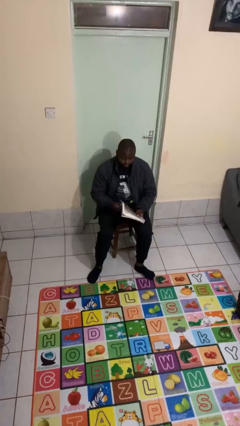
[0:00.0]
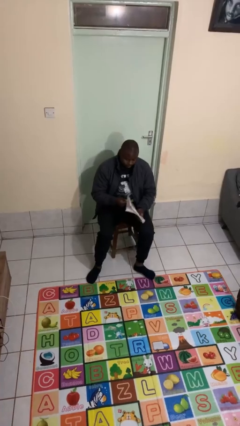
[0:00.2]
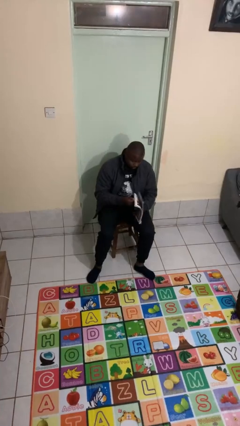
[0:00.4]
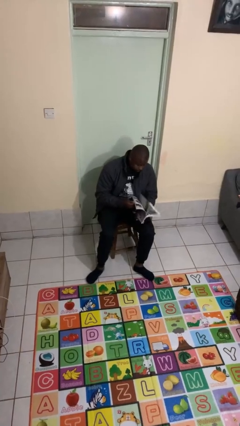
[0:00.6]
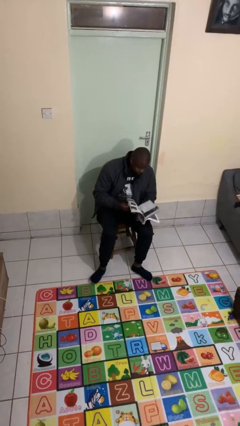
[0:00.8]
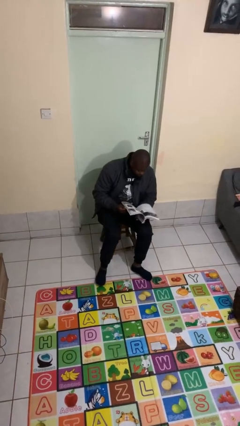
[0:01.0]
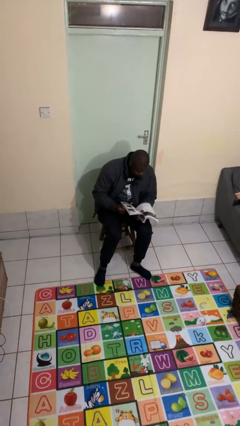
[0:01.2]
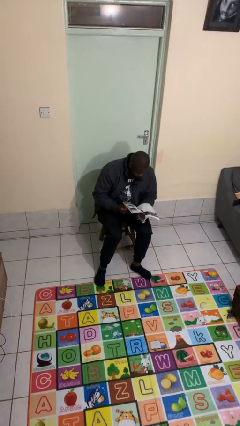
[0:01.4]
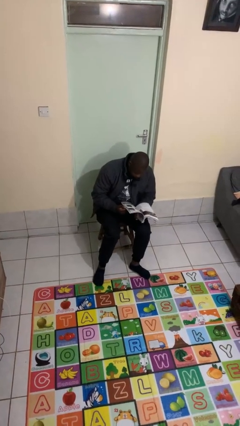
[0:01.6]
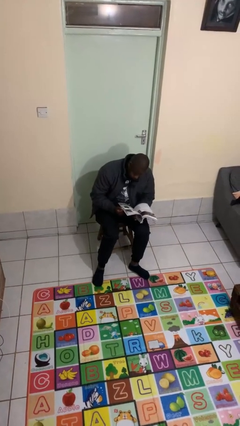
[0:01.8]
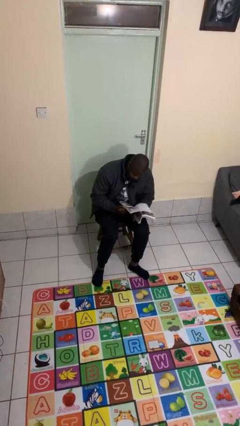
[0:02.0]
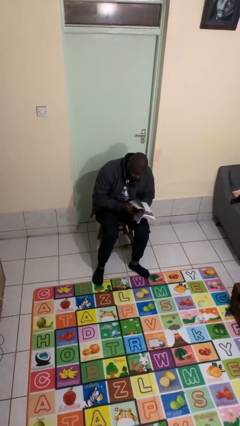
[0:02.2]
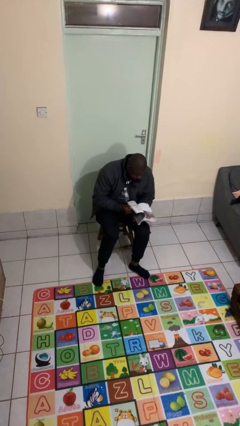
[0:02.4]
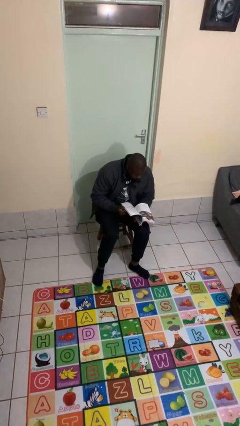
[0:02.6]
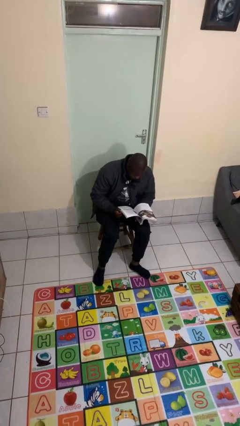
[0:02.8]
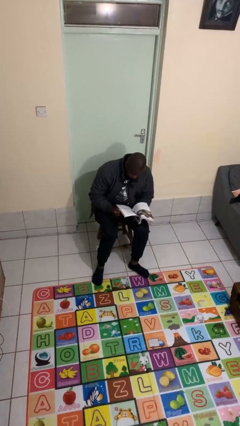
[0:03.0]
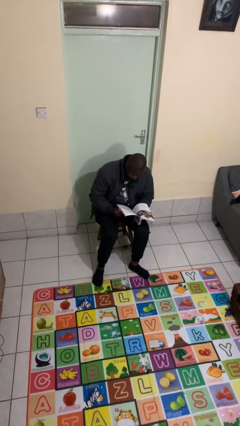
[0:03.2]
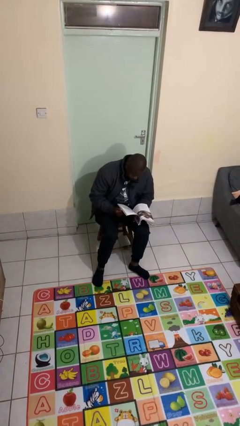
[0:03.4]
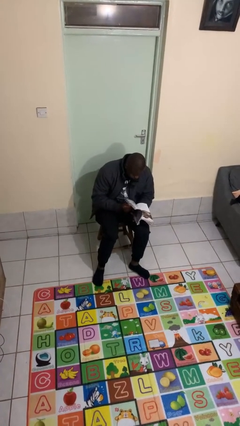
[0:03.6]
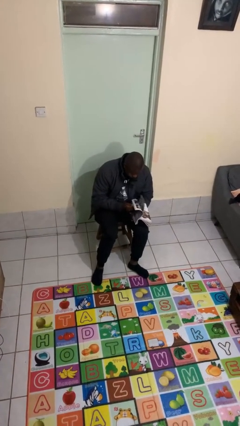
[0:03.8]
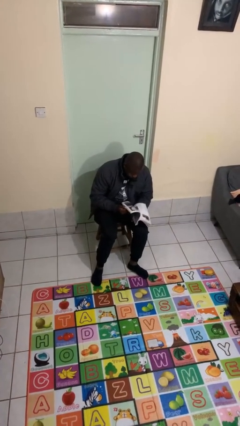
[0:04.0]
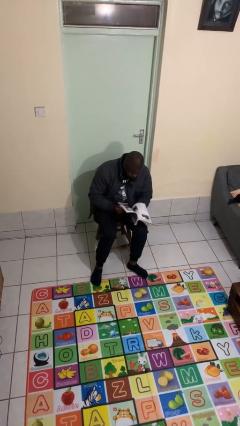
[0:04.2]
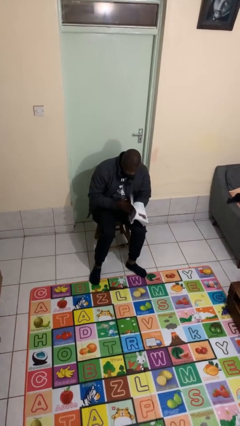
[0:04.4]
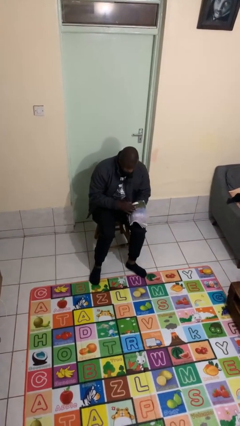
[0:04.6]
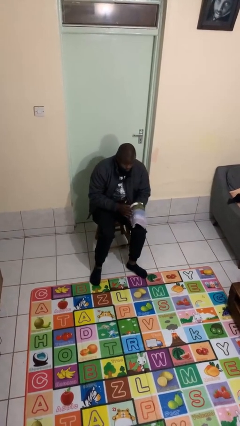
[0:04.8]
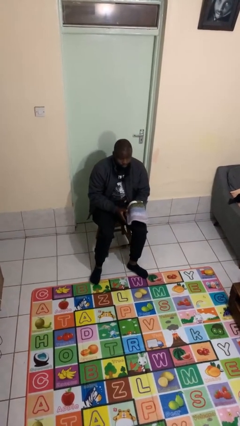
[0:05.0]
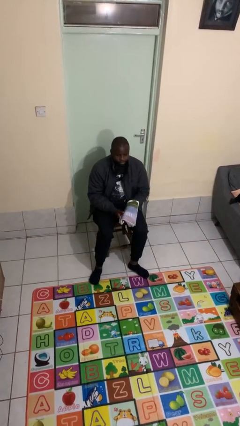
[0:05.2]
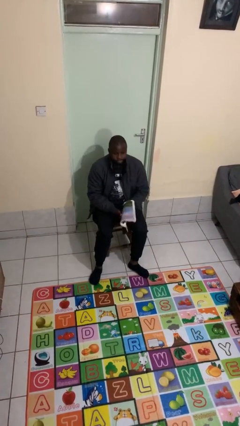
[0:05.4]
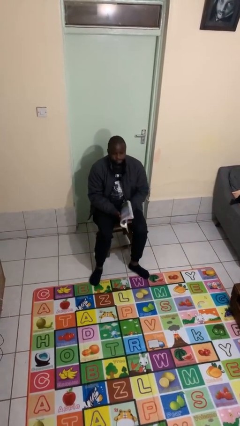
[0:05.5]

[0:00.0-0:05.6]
person reads magazine

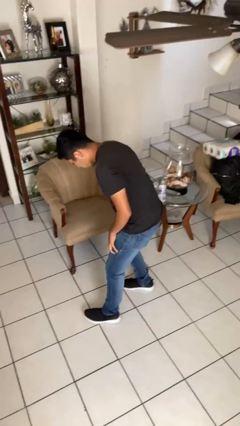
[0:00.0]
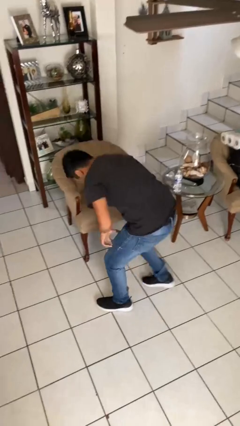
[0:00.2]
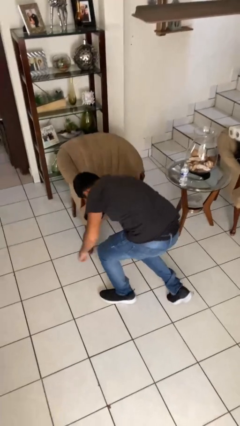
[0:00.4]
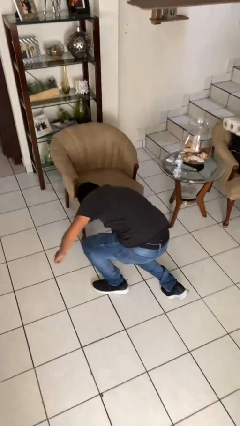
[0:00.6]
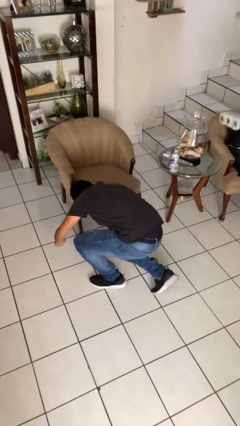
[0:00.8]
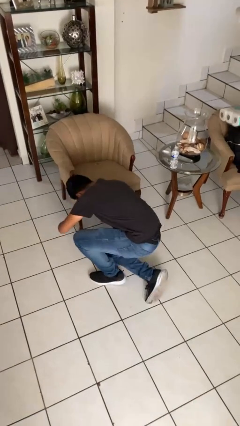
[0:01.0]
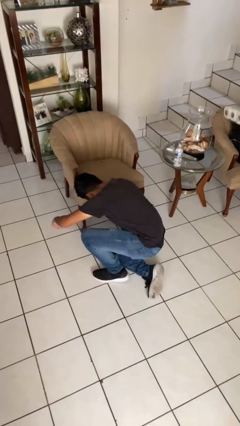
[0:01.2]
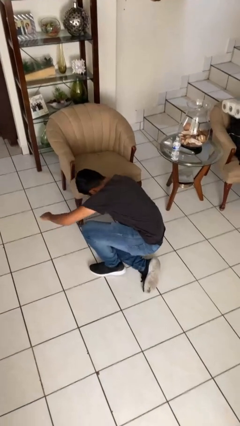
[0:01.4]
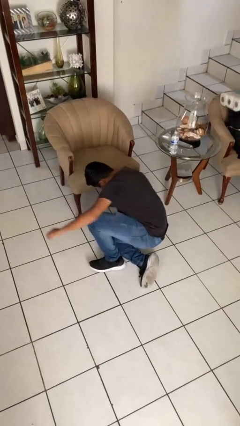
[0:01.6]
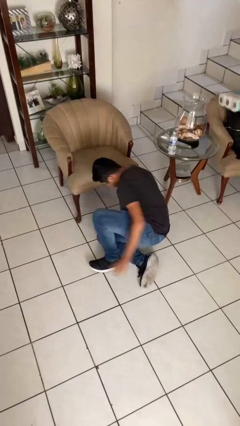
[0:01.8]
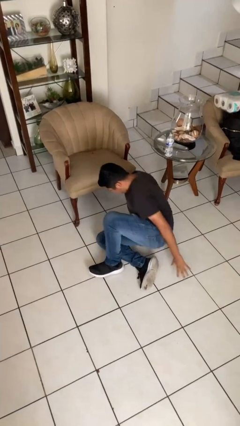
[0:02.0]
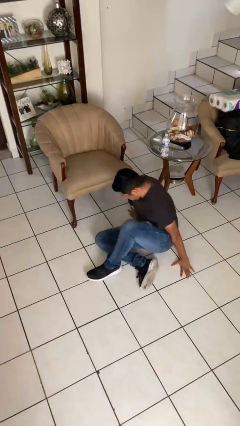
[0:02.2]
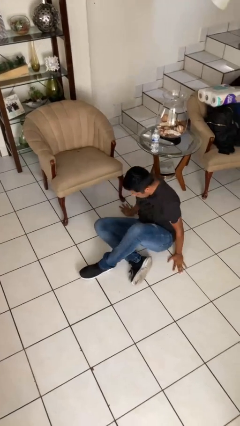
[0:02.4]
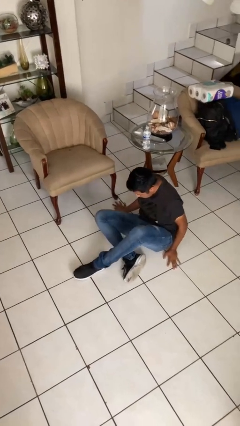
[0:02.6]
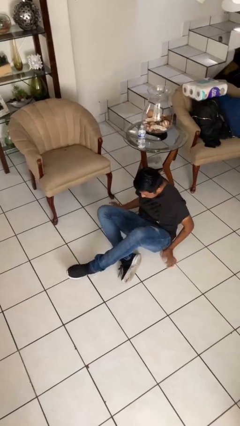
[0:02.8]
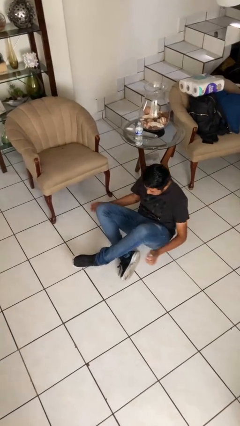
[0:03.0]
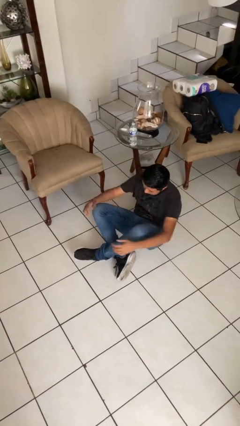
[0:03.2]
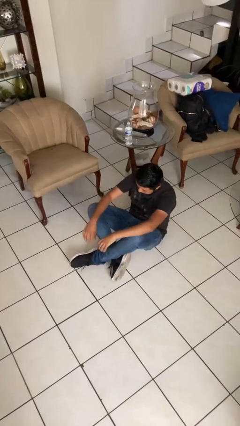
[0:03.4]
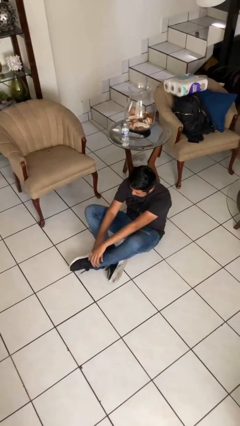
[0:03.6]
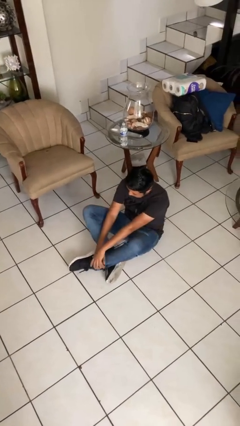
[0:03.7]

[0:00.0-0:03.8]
person sits crisscross

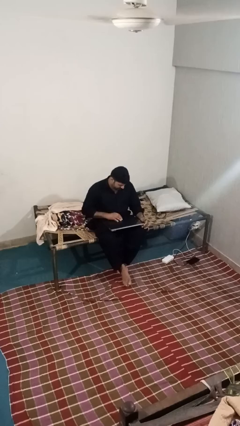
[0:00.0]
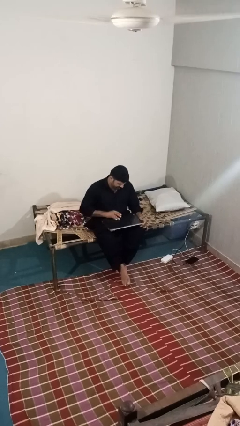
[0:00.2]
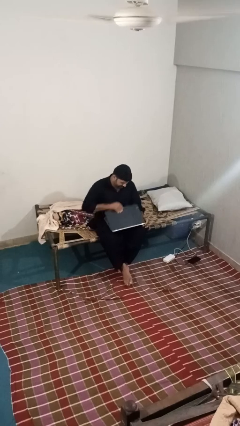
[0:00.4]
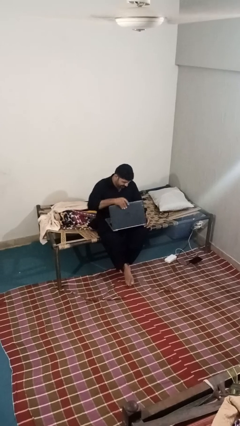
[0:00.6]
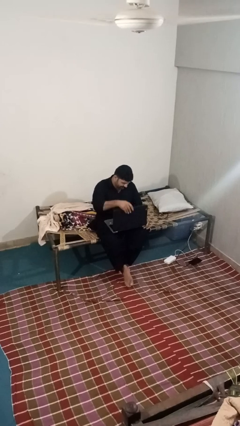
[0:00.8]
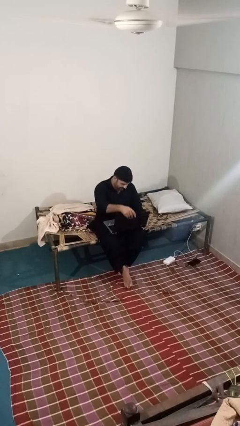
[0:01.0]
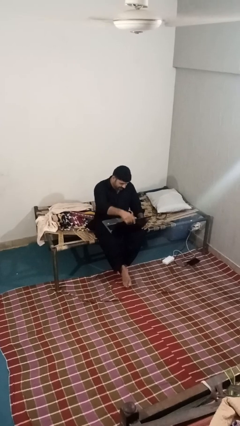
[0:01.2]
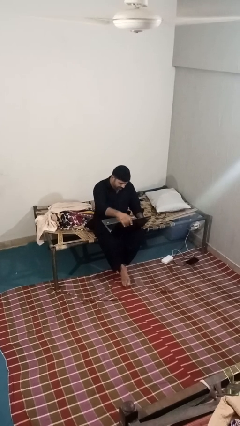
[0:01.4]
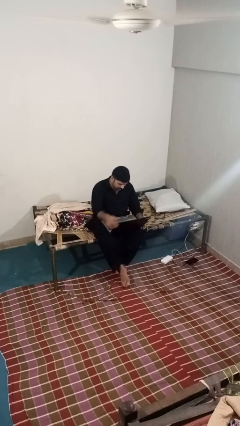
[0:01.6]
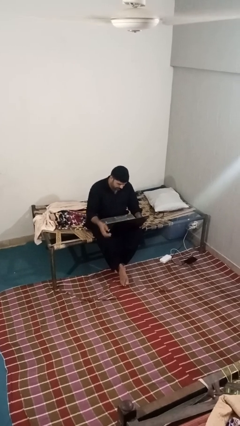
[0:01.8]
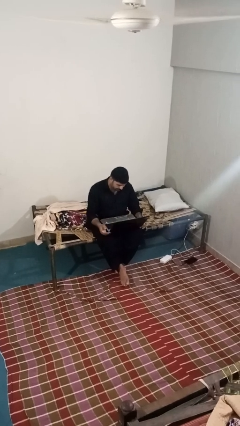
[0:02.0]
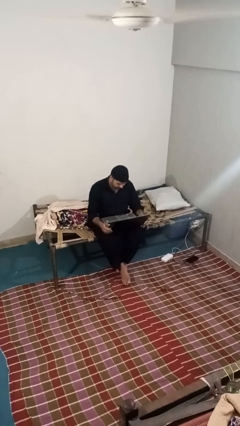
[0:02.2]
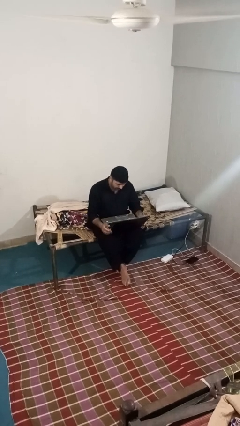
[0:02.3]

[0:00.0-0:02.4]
person opens laptop

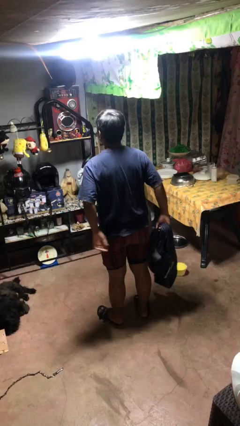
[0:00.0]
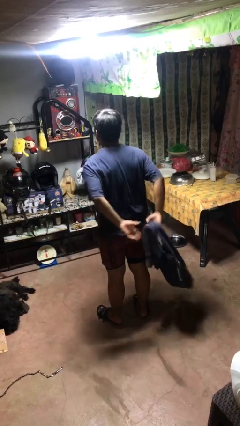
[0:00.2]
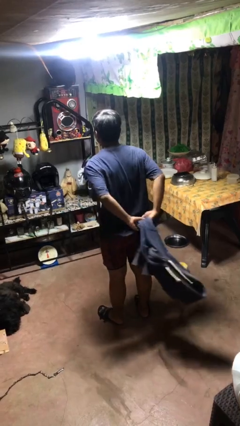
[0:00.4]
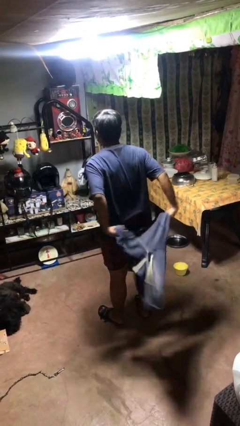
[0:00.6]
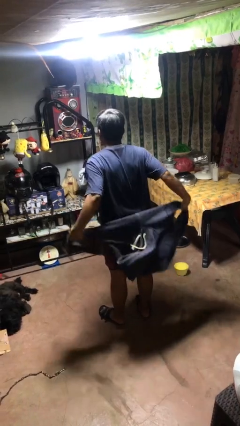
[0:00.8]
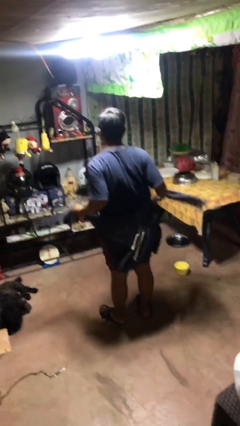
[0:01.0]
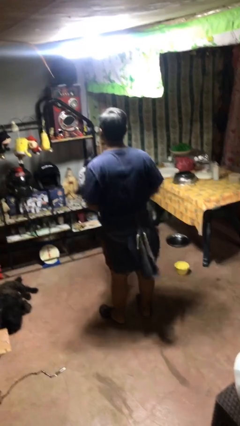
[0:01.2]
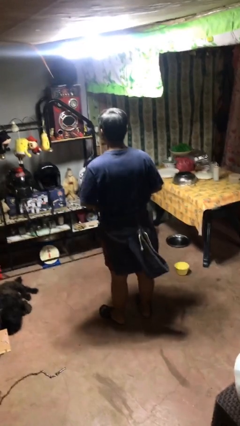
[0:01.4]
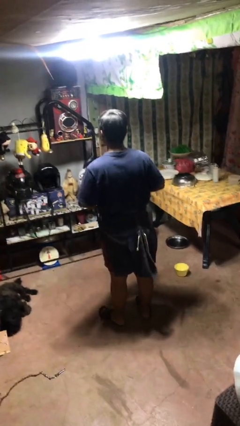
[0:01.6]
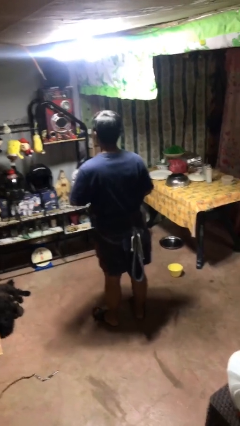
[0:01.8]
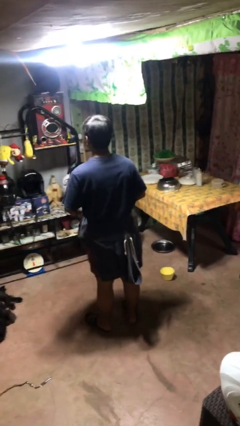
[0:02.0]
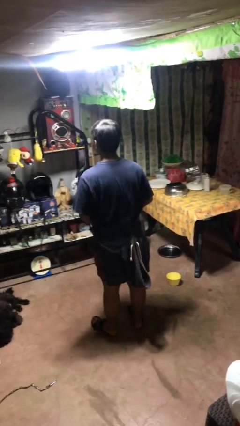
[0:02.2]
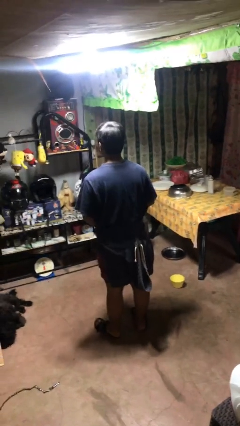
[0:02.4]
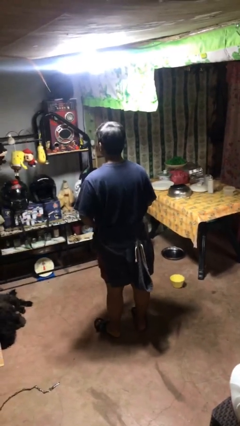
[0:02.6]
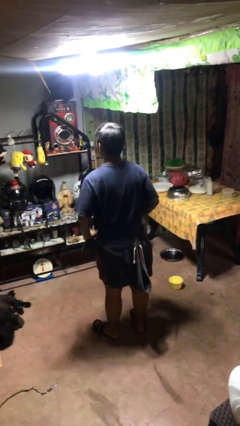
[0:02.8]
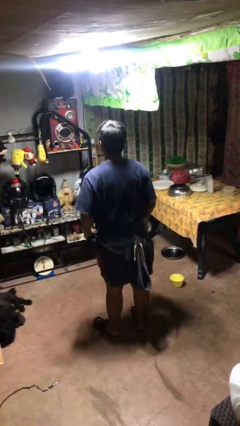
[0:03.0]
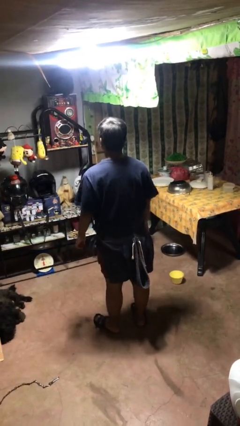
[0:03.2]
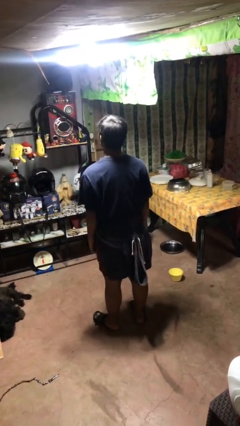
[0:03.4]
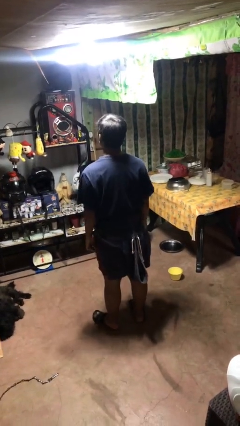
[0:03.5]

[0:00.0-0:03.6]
person ties jacket around waist

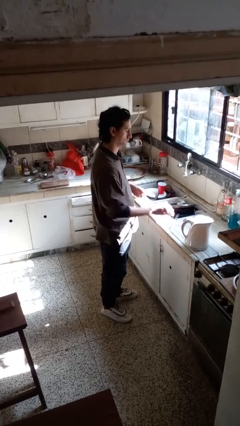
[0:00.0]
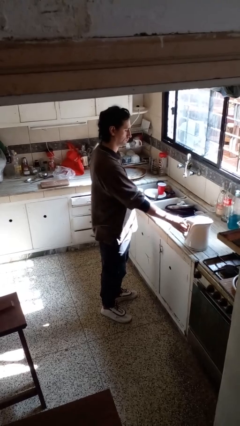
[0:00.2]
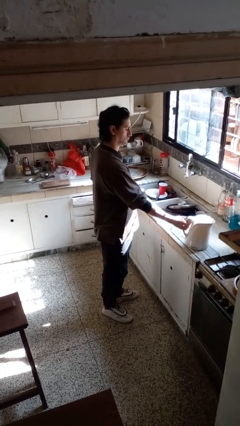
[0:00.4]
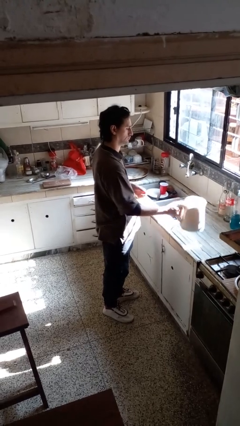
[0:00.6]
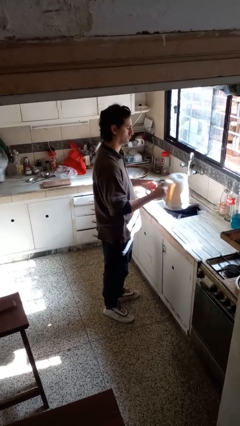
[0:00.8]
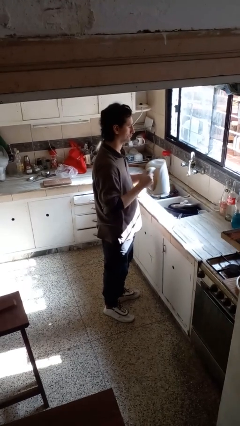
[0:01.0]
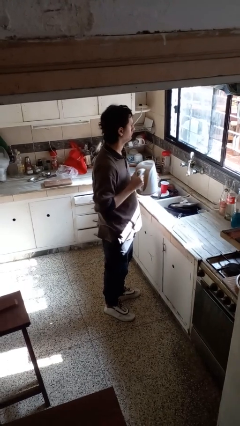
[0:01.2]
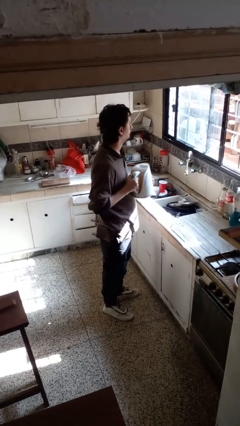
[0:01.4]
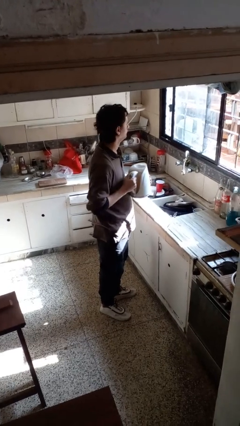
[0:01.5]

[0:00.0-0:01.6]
person picks up object from countertop
